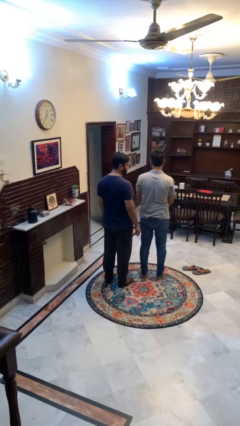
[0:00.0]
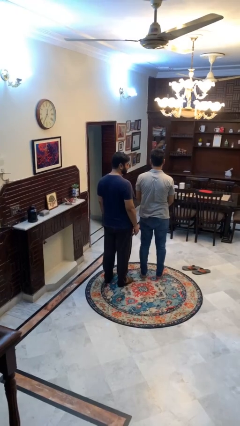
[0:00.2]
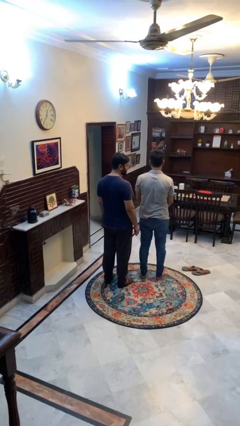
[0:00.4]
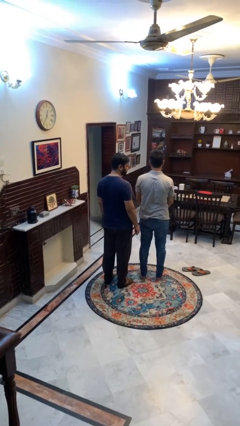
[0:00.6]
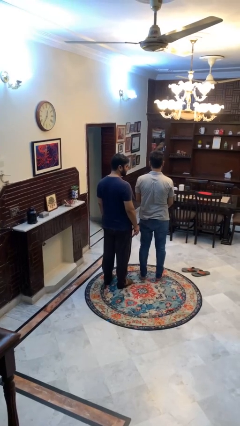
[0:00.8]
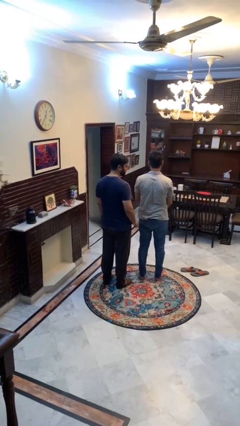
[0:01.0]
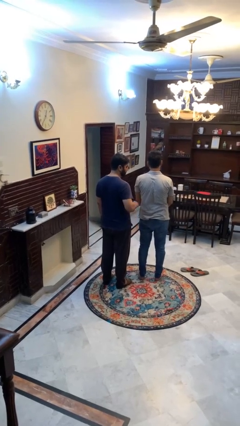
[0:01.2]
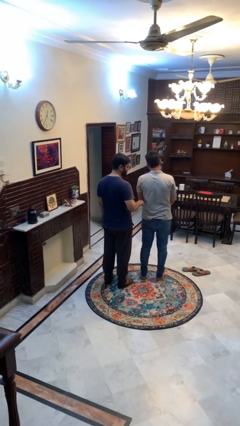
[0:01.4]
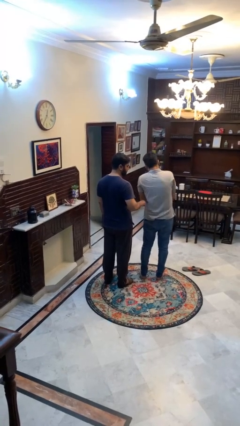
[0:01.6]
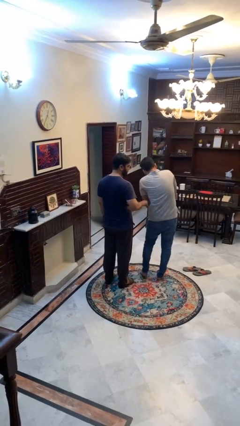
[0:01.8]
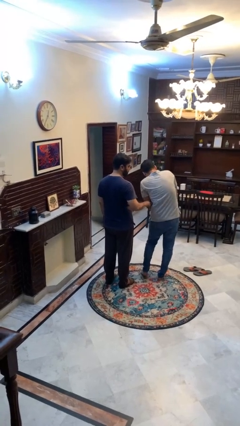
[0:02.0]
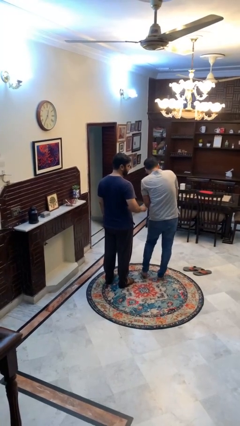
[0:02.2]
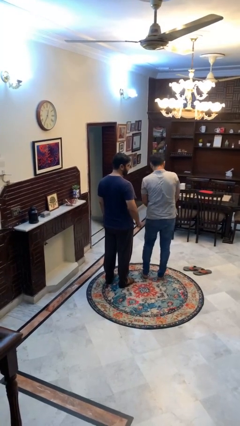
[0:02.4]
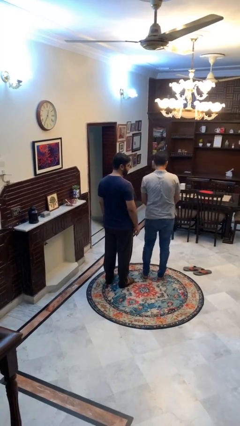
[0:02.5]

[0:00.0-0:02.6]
person tickles person

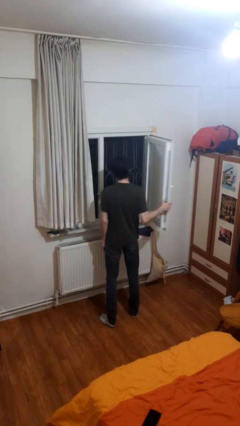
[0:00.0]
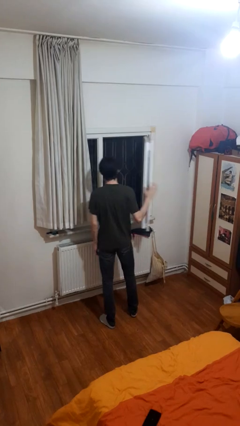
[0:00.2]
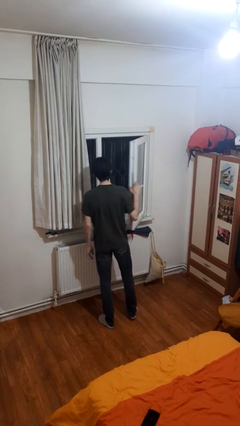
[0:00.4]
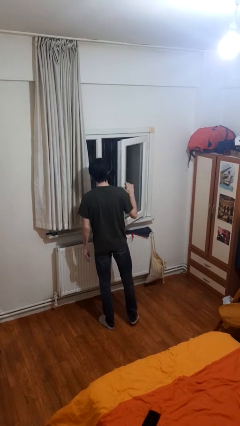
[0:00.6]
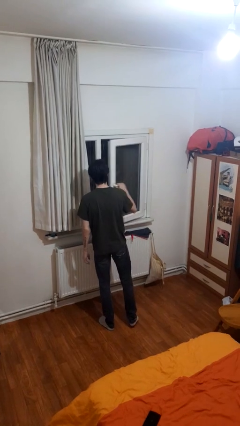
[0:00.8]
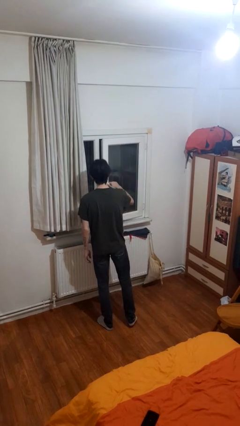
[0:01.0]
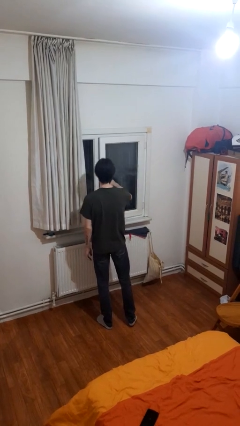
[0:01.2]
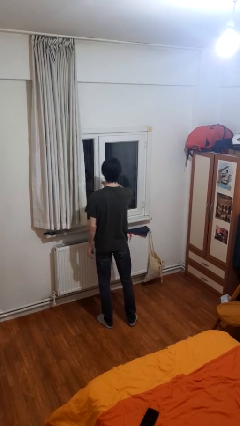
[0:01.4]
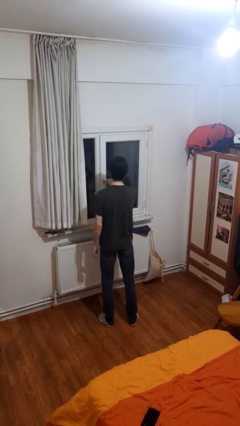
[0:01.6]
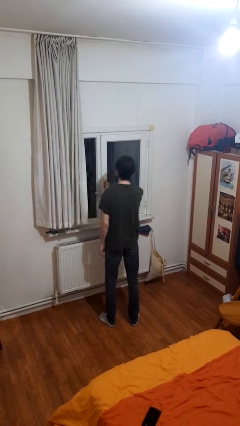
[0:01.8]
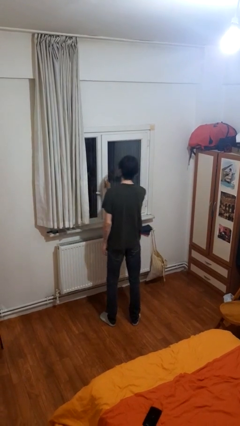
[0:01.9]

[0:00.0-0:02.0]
person closes home window

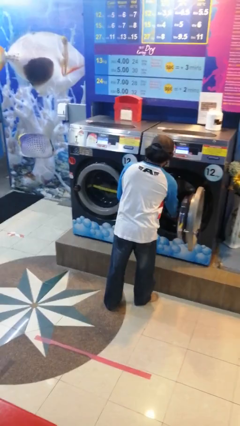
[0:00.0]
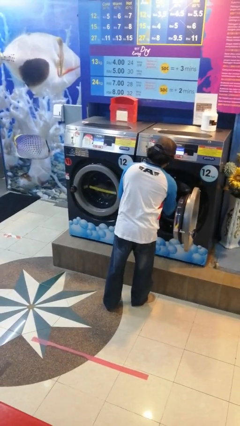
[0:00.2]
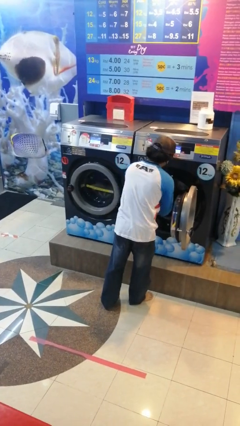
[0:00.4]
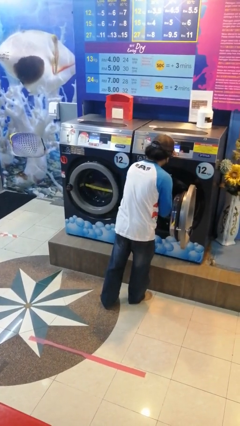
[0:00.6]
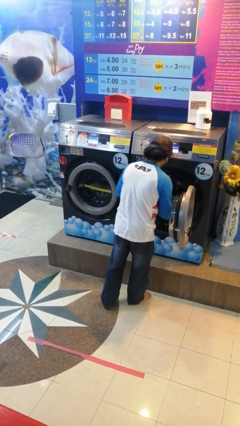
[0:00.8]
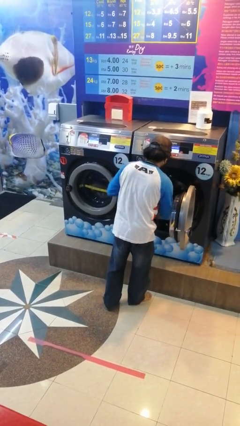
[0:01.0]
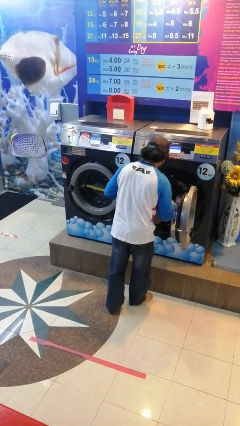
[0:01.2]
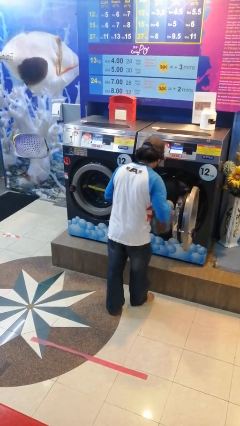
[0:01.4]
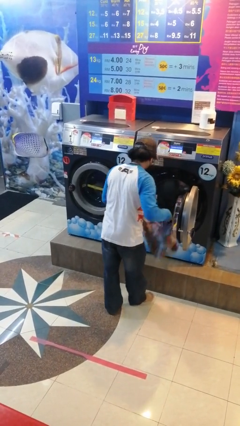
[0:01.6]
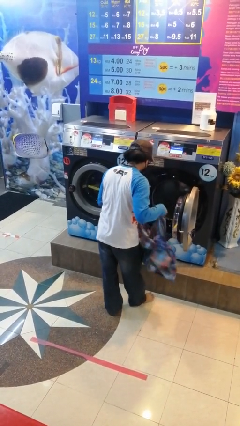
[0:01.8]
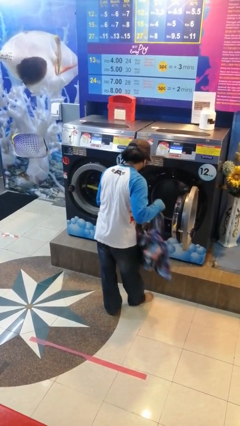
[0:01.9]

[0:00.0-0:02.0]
person unloads clotheswasher

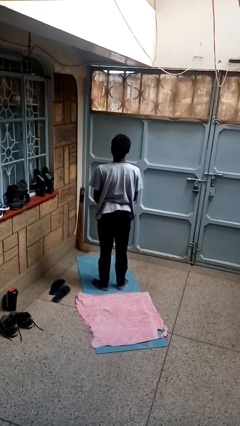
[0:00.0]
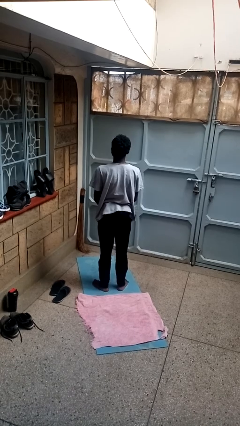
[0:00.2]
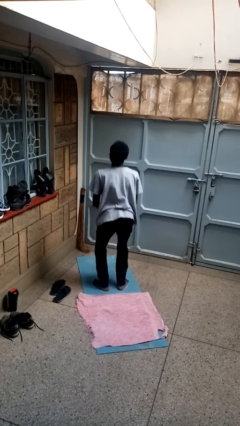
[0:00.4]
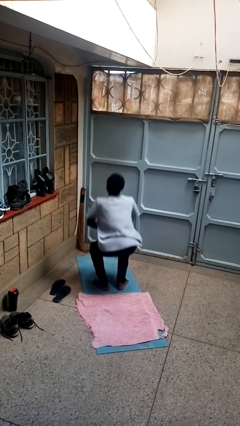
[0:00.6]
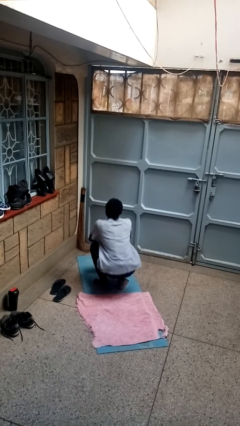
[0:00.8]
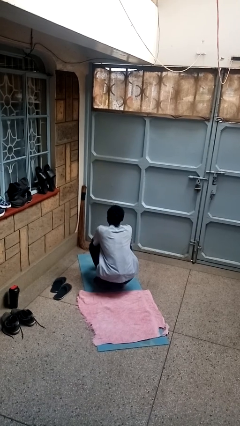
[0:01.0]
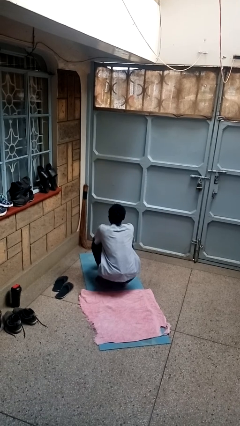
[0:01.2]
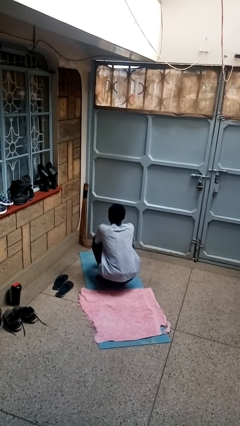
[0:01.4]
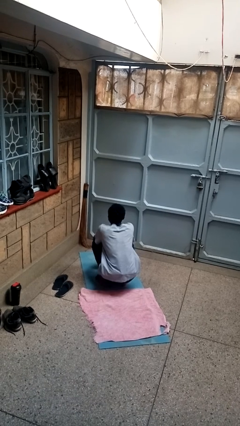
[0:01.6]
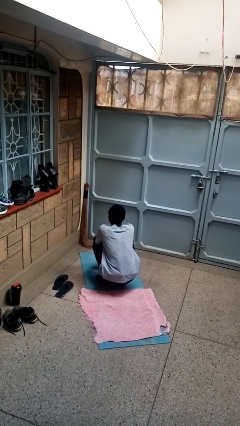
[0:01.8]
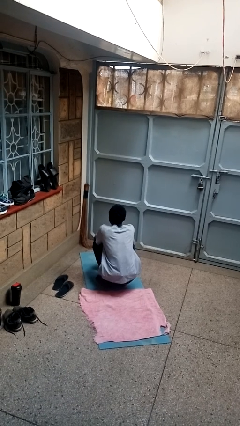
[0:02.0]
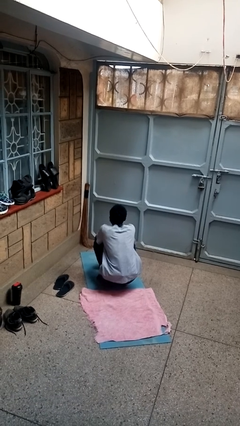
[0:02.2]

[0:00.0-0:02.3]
person squats

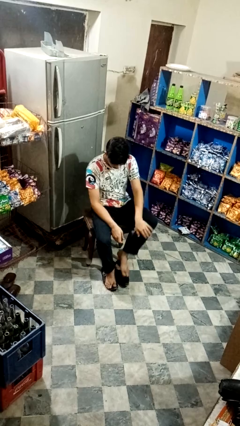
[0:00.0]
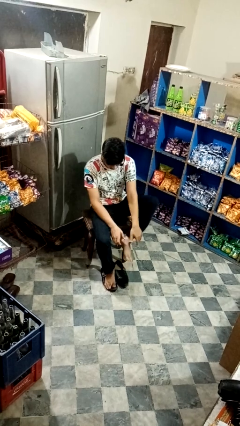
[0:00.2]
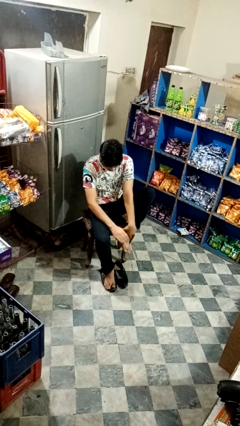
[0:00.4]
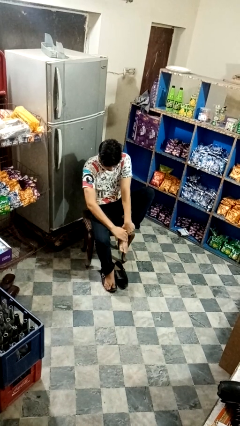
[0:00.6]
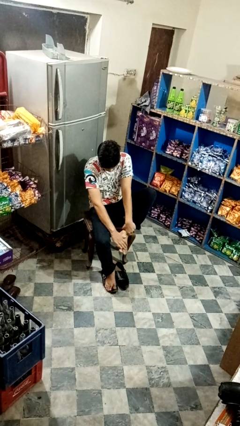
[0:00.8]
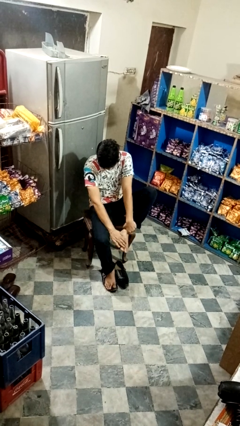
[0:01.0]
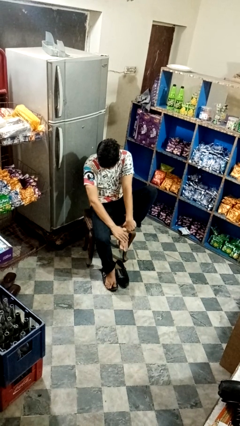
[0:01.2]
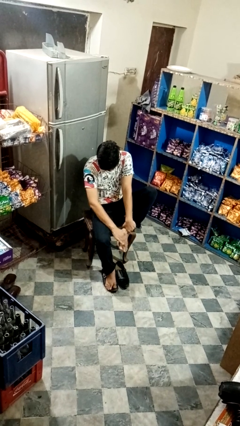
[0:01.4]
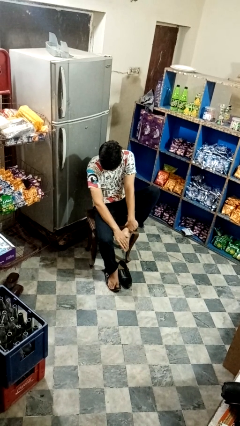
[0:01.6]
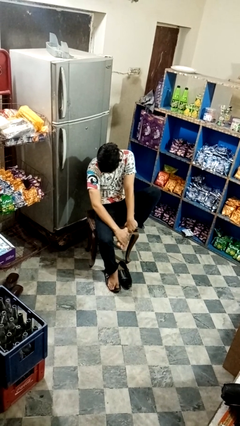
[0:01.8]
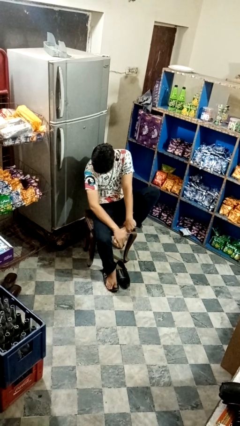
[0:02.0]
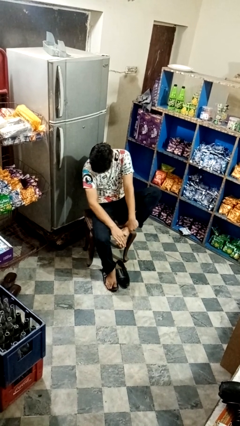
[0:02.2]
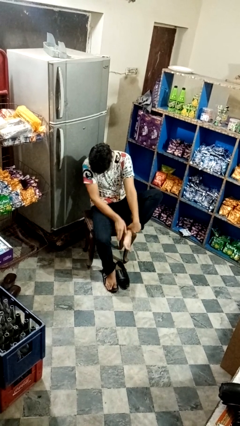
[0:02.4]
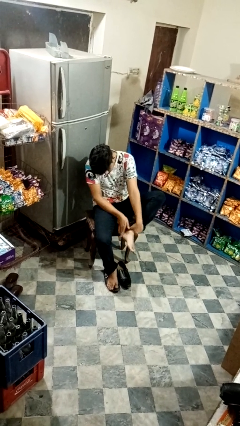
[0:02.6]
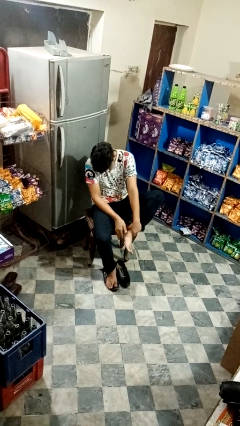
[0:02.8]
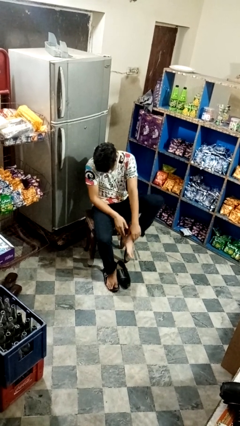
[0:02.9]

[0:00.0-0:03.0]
person rubs foot

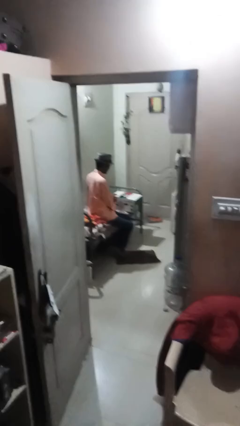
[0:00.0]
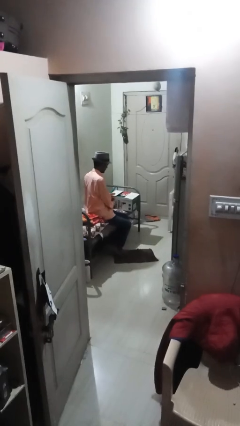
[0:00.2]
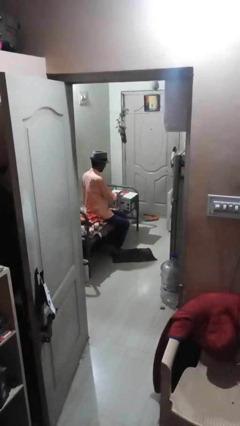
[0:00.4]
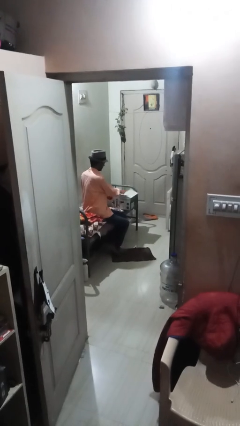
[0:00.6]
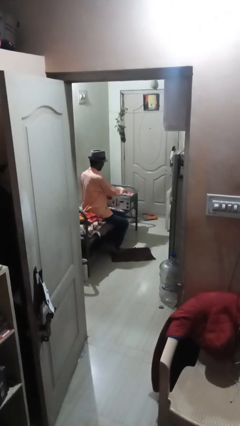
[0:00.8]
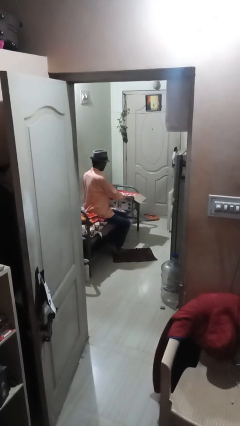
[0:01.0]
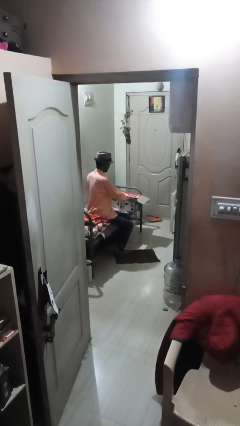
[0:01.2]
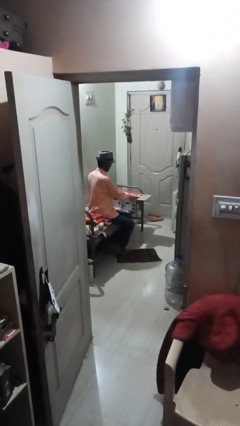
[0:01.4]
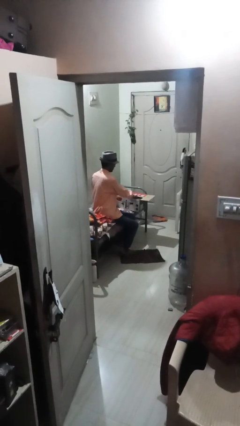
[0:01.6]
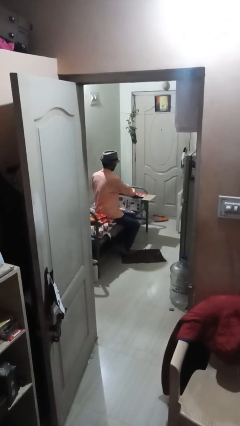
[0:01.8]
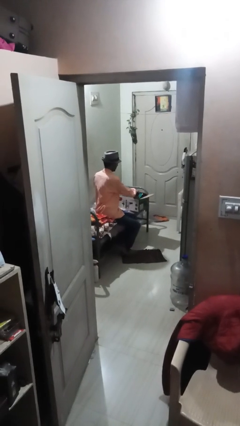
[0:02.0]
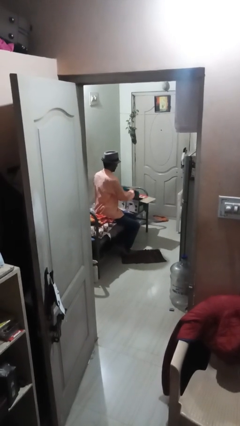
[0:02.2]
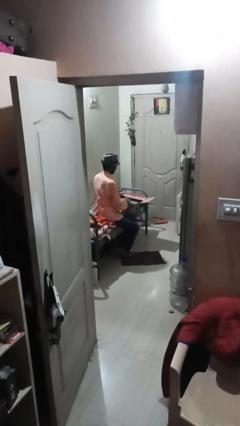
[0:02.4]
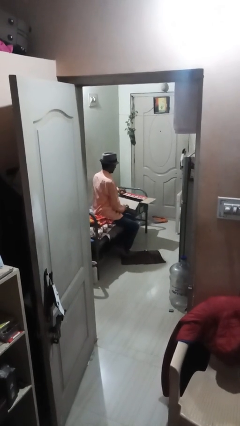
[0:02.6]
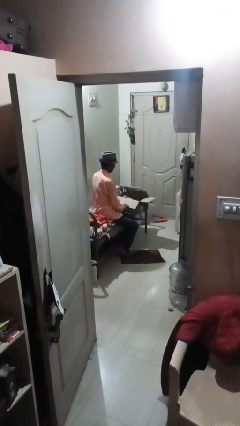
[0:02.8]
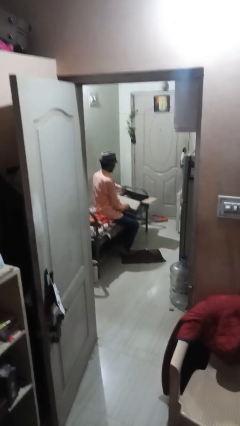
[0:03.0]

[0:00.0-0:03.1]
person opens box

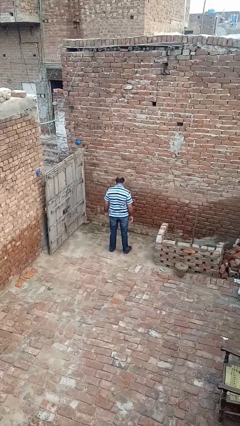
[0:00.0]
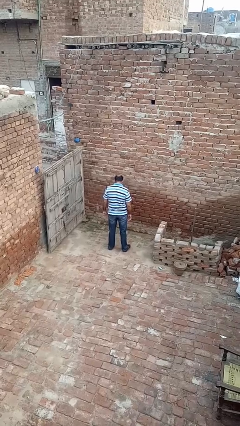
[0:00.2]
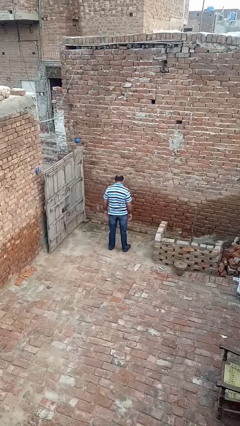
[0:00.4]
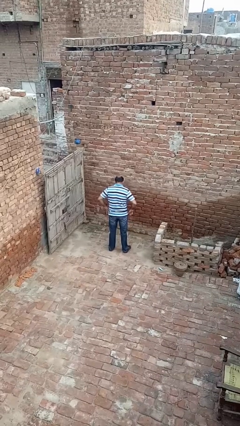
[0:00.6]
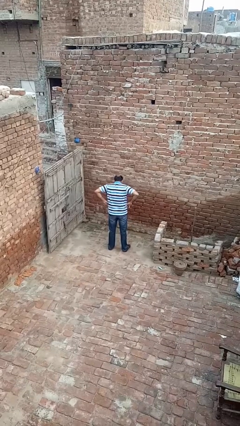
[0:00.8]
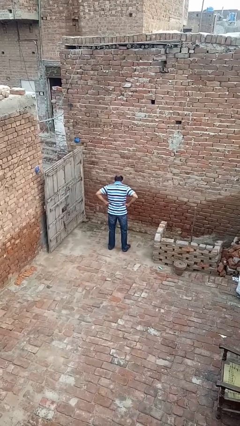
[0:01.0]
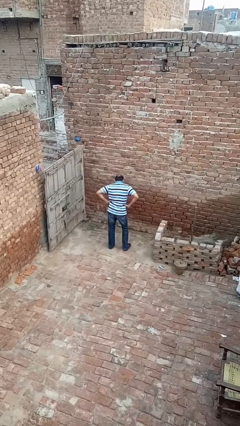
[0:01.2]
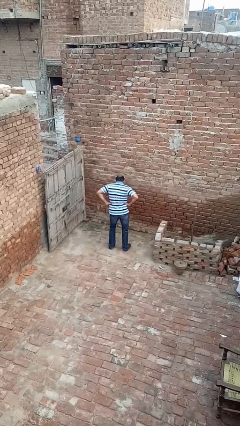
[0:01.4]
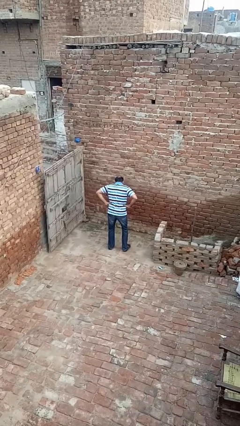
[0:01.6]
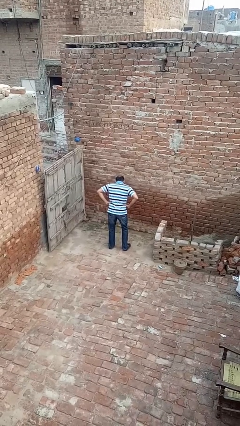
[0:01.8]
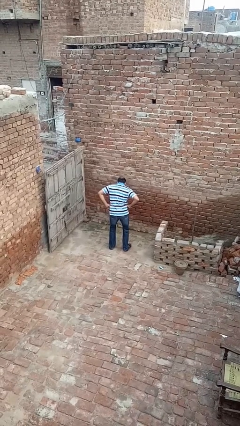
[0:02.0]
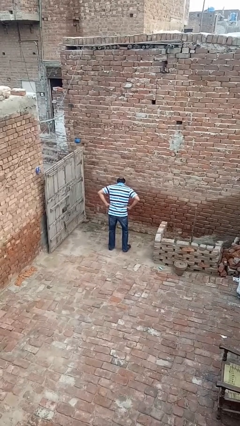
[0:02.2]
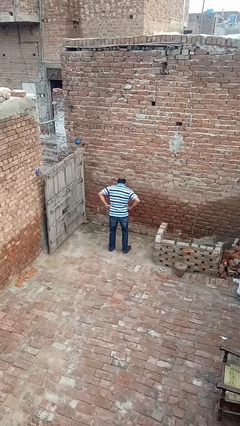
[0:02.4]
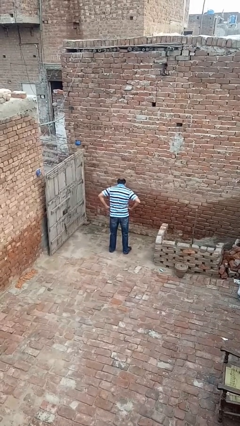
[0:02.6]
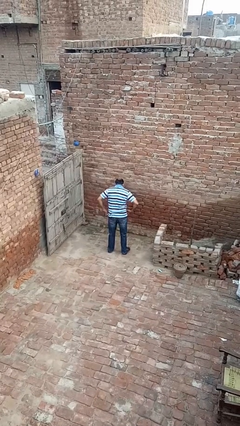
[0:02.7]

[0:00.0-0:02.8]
person wiggles hips
